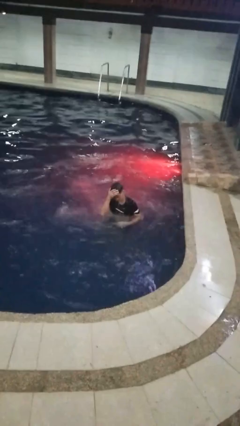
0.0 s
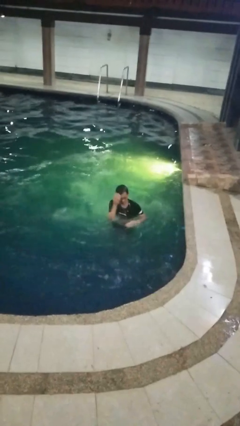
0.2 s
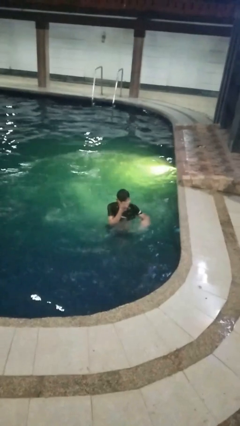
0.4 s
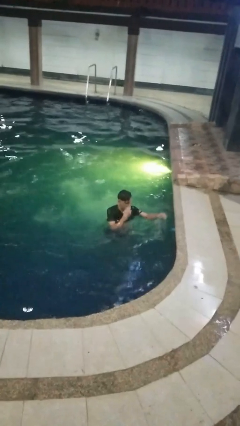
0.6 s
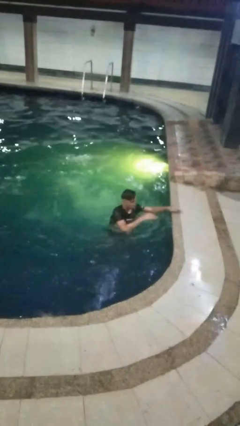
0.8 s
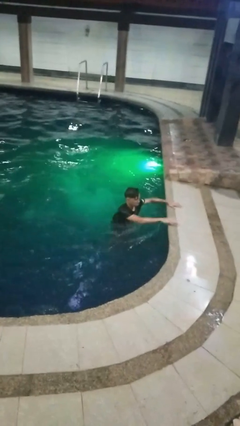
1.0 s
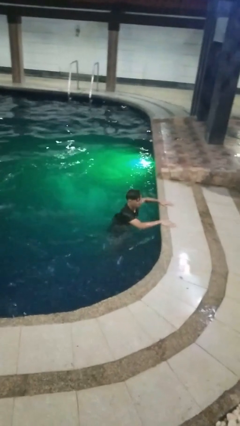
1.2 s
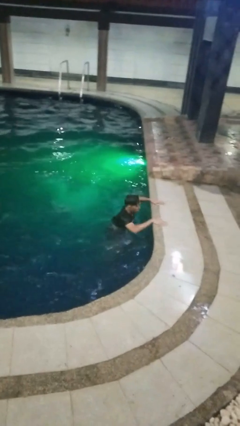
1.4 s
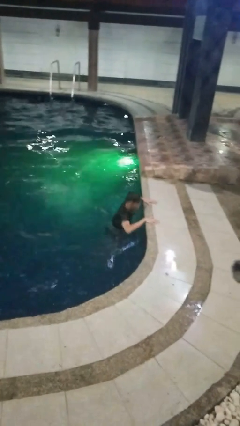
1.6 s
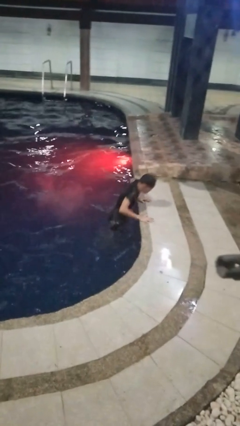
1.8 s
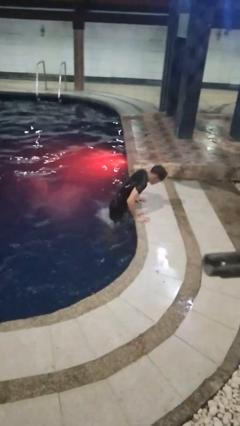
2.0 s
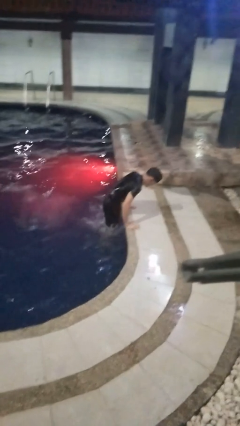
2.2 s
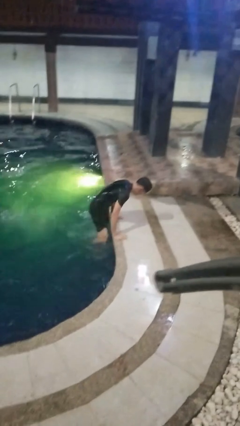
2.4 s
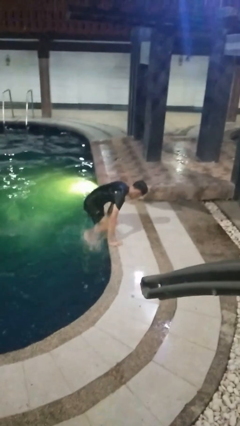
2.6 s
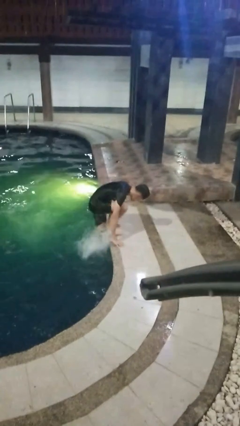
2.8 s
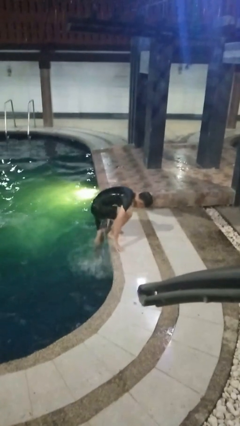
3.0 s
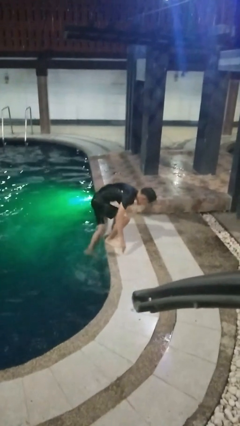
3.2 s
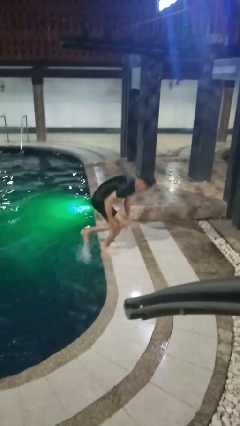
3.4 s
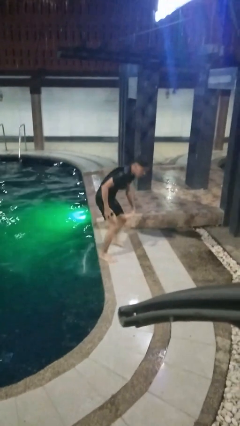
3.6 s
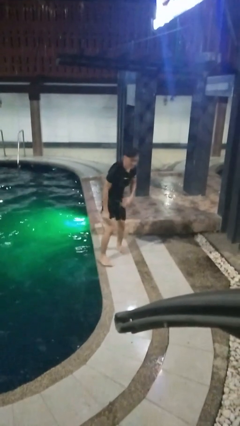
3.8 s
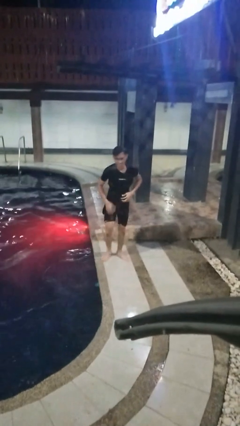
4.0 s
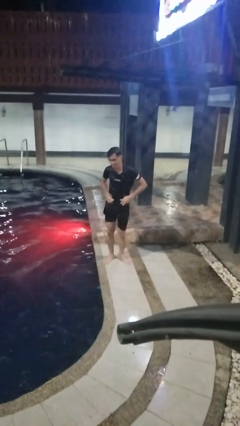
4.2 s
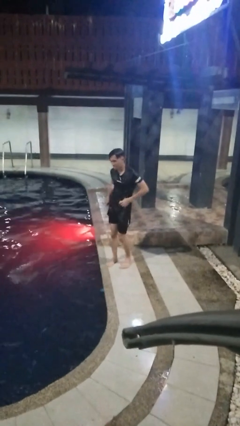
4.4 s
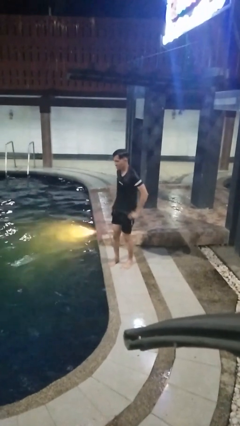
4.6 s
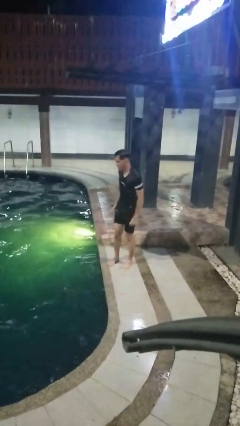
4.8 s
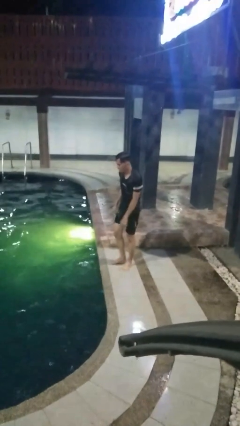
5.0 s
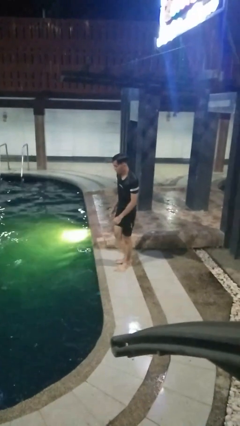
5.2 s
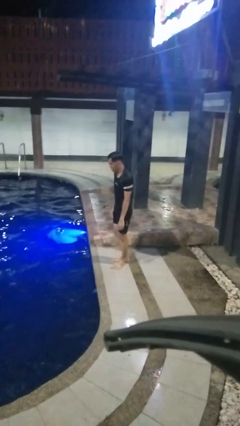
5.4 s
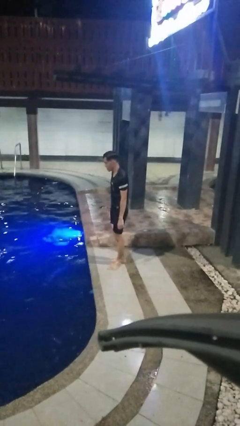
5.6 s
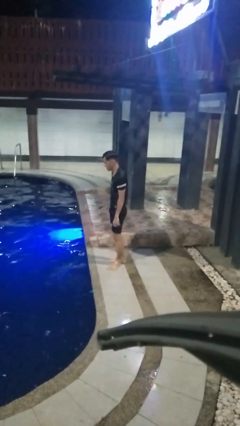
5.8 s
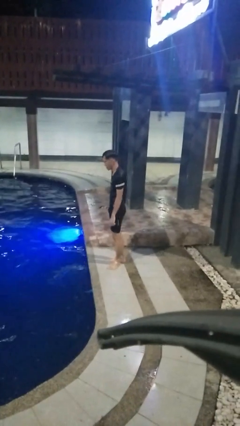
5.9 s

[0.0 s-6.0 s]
person exits pool

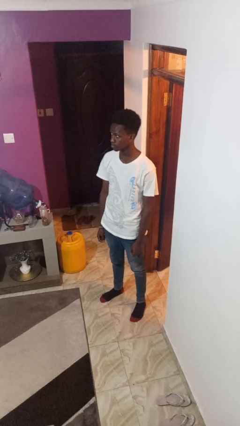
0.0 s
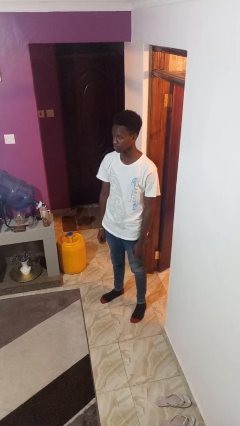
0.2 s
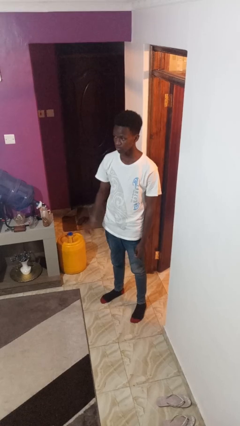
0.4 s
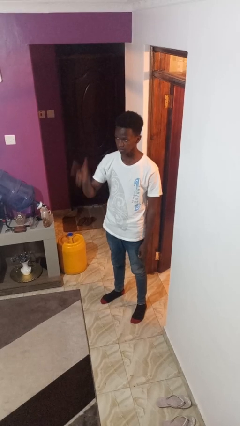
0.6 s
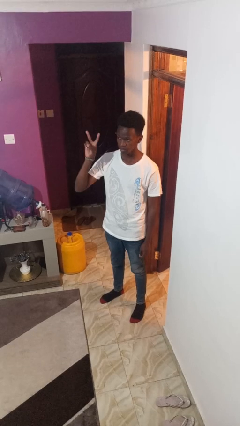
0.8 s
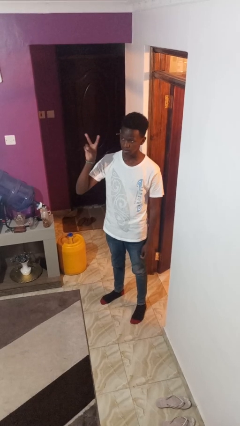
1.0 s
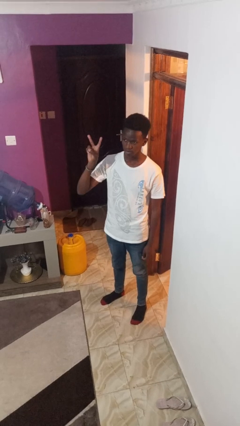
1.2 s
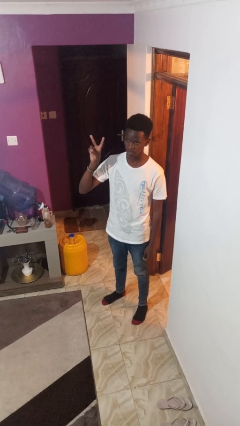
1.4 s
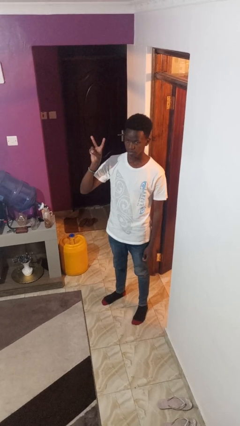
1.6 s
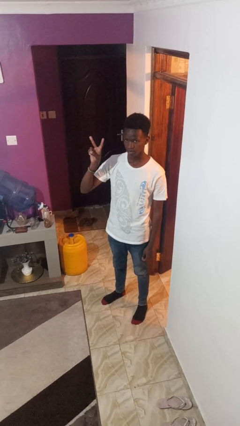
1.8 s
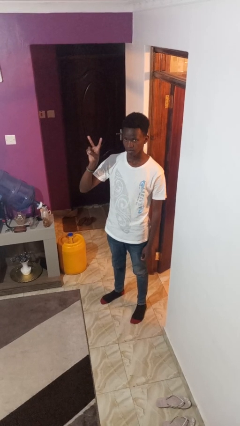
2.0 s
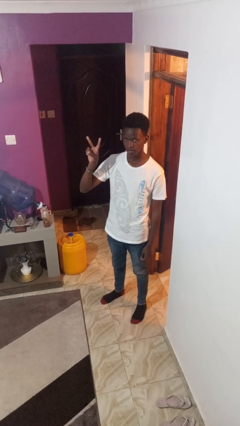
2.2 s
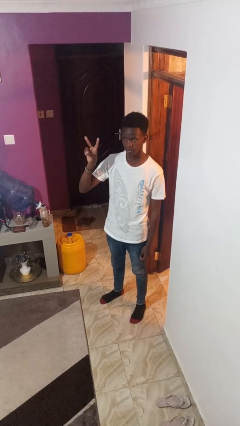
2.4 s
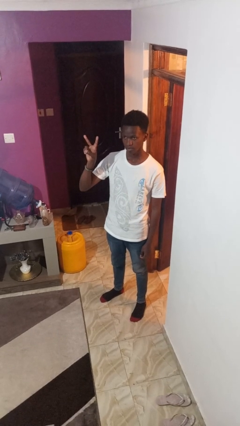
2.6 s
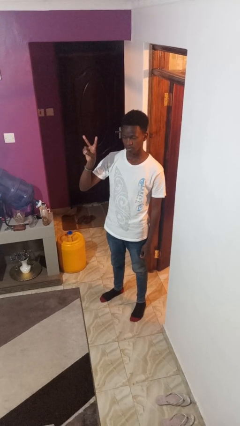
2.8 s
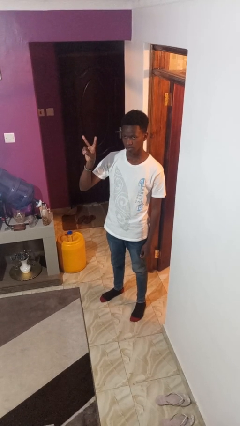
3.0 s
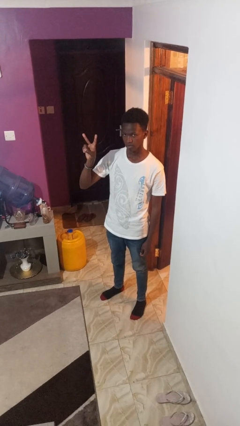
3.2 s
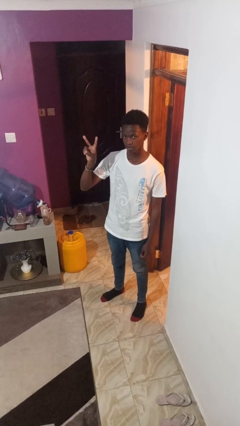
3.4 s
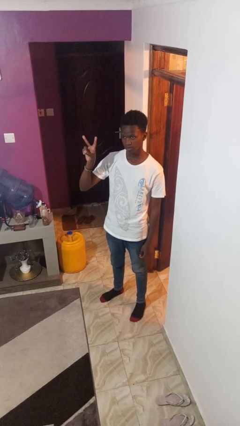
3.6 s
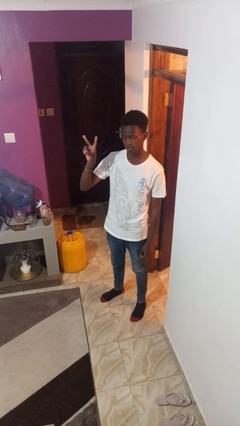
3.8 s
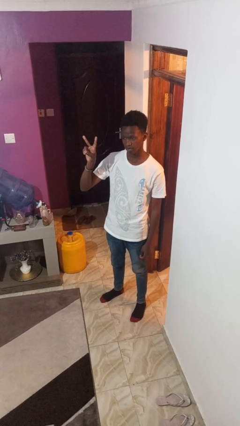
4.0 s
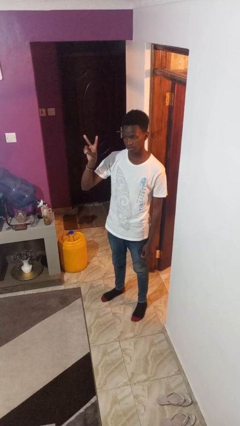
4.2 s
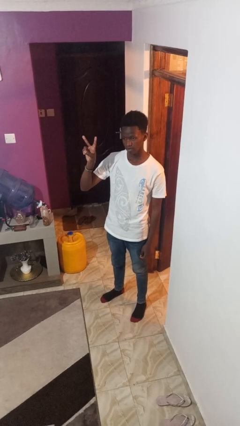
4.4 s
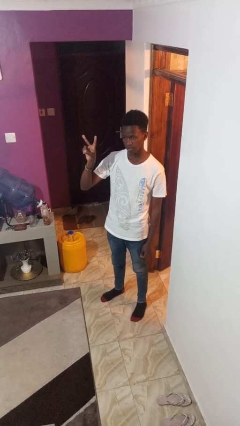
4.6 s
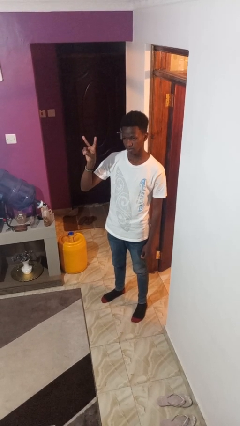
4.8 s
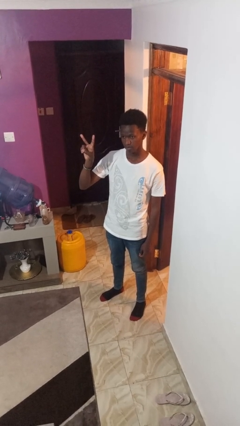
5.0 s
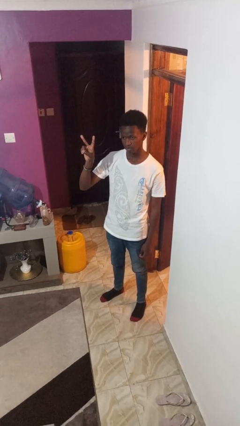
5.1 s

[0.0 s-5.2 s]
person gestures peace

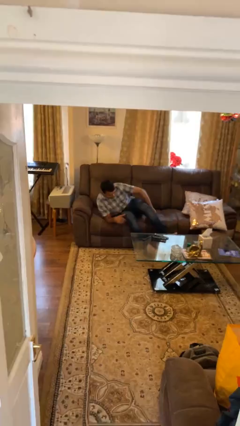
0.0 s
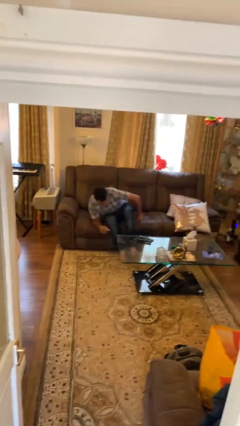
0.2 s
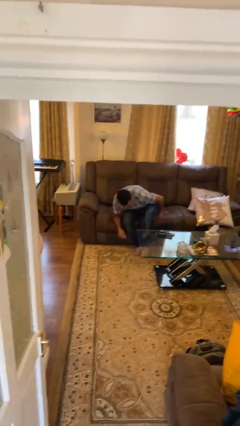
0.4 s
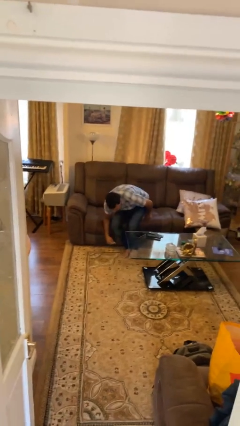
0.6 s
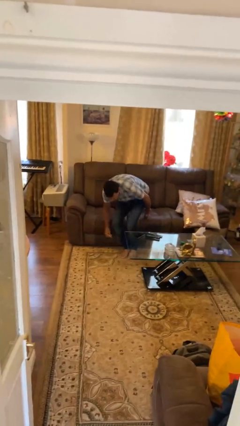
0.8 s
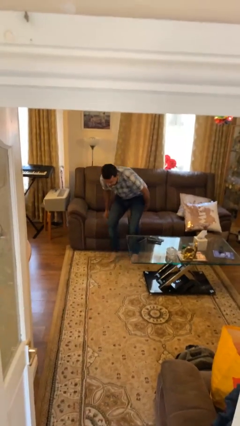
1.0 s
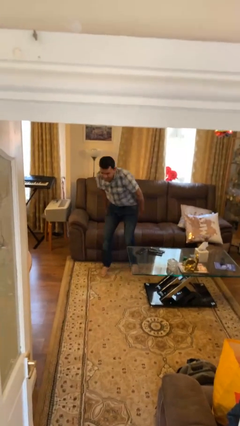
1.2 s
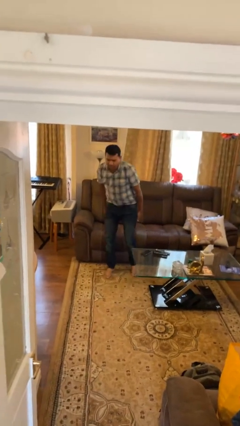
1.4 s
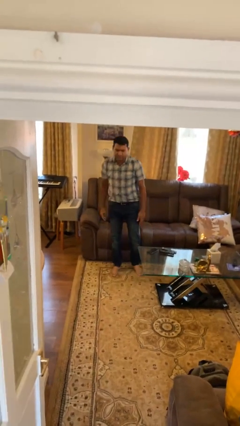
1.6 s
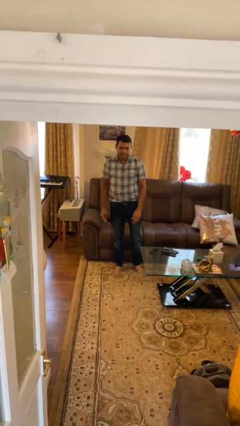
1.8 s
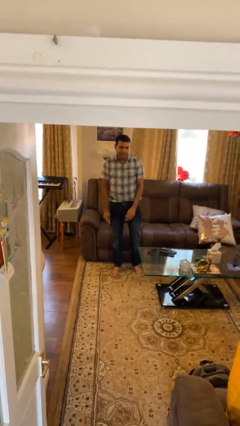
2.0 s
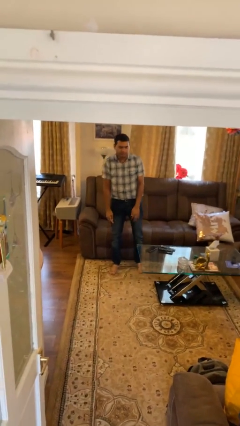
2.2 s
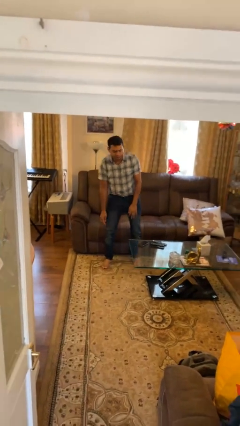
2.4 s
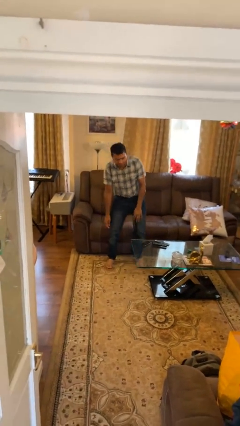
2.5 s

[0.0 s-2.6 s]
person stands up

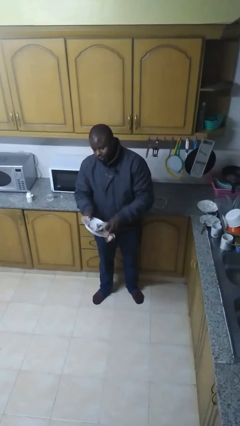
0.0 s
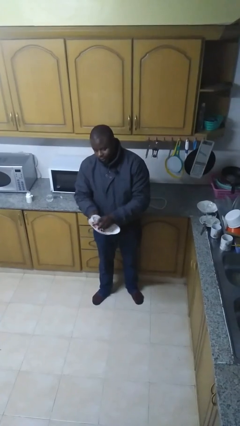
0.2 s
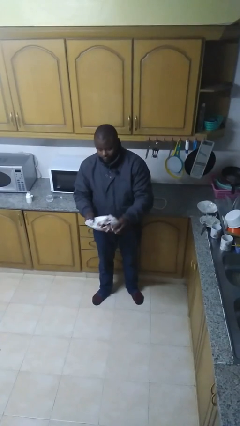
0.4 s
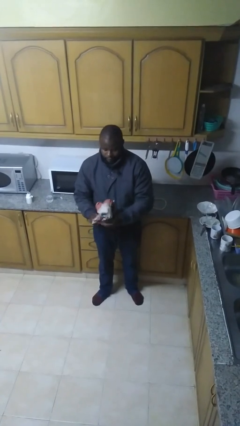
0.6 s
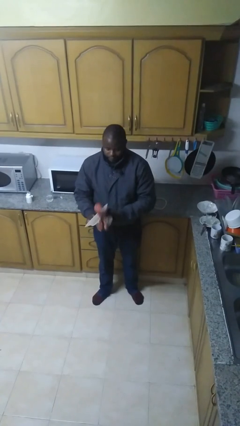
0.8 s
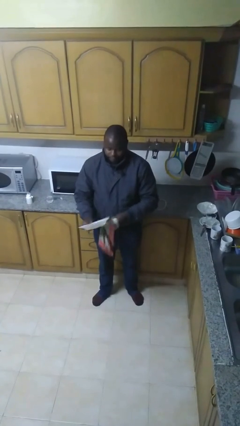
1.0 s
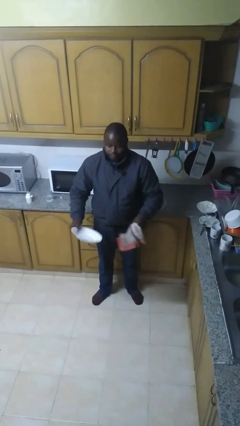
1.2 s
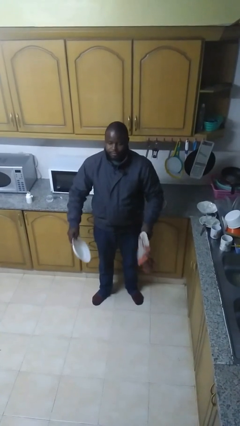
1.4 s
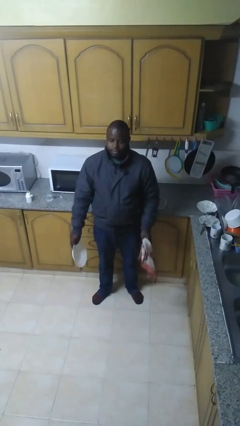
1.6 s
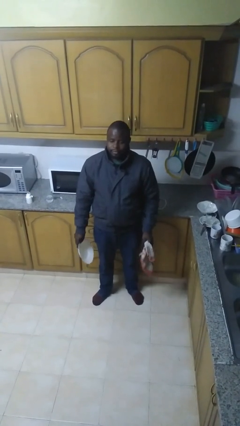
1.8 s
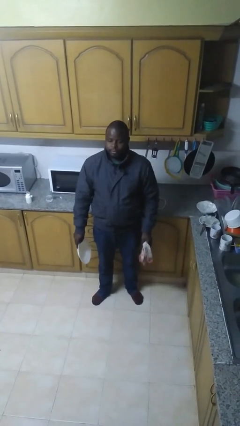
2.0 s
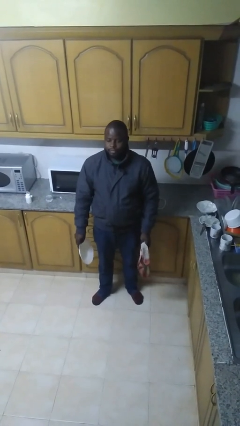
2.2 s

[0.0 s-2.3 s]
person dries dish

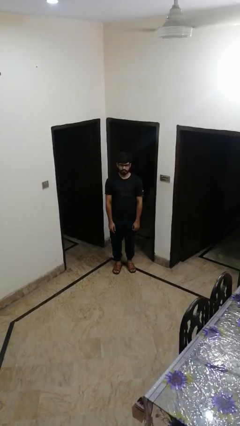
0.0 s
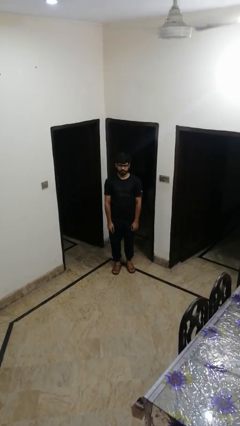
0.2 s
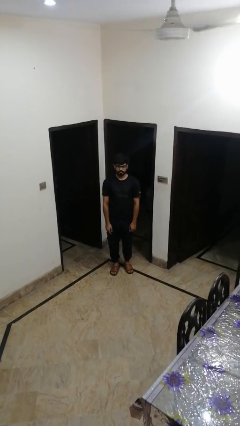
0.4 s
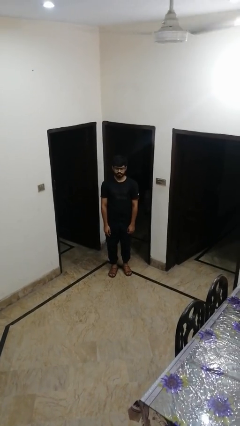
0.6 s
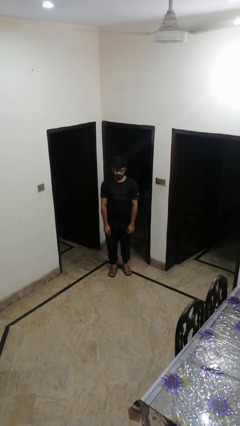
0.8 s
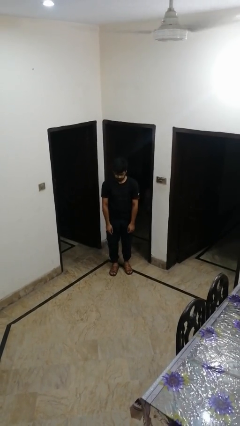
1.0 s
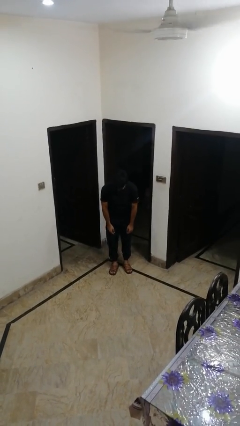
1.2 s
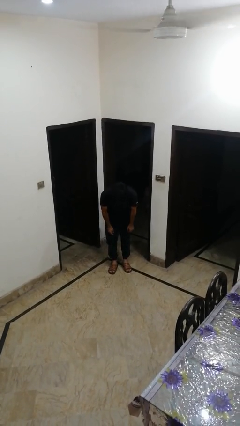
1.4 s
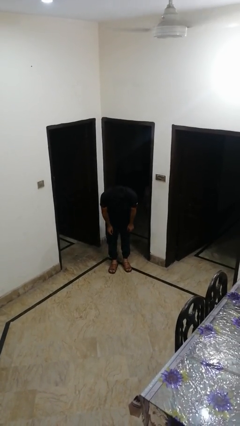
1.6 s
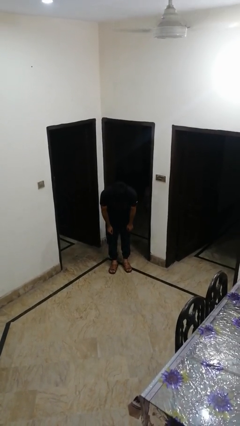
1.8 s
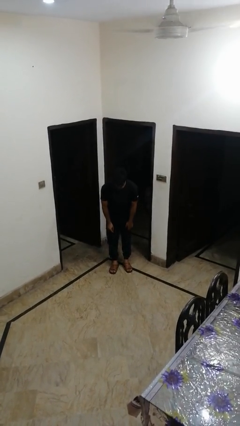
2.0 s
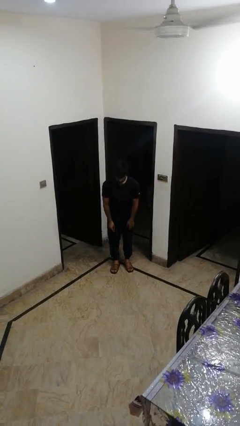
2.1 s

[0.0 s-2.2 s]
person bows
